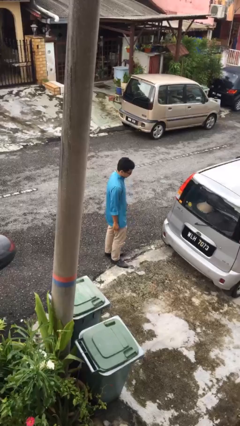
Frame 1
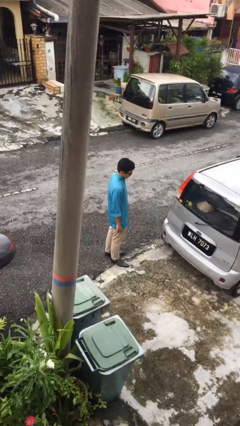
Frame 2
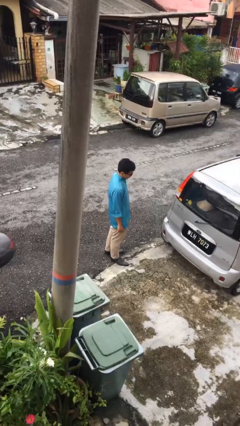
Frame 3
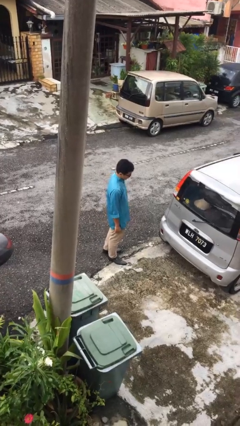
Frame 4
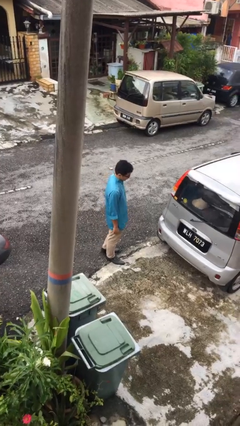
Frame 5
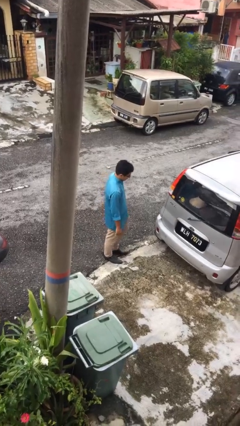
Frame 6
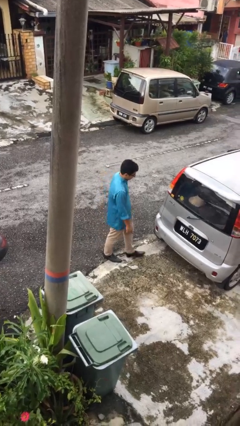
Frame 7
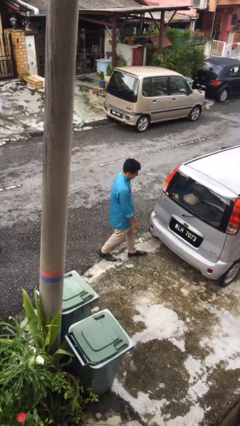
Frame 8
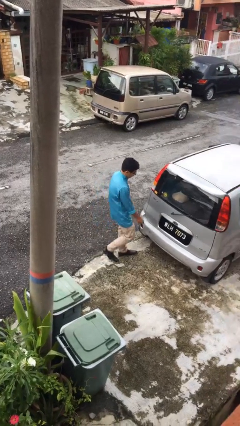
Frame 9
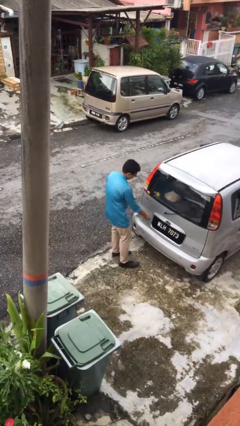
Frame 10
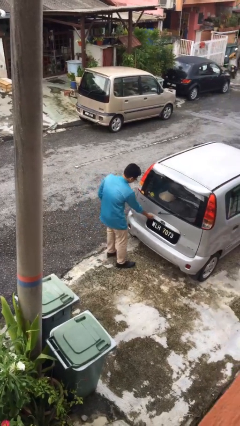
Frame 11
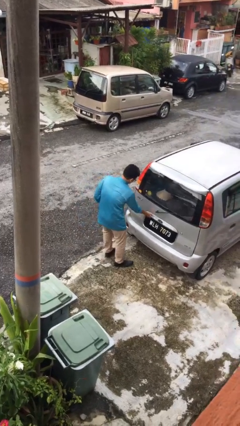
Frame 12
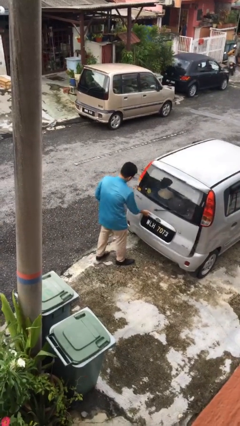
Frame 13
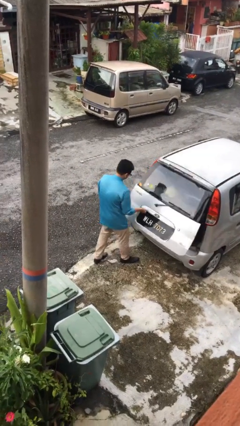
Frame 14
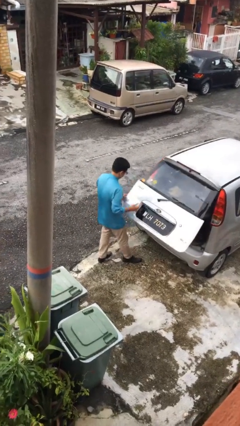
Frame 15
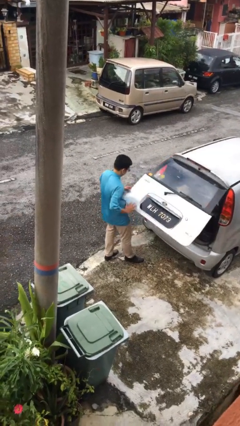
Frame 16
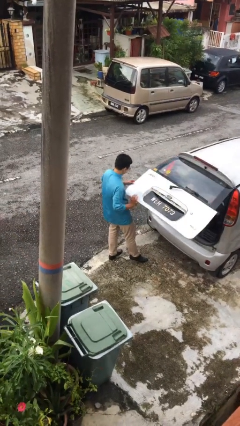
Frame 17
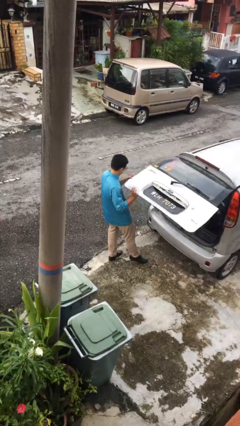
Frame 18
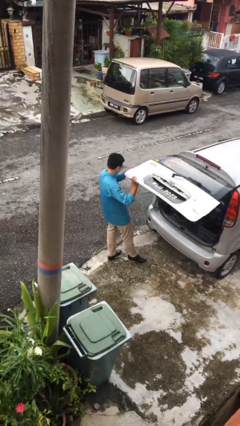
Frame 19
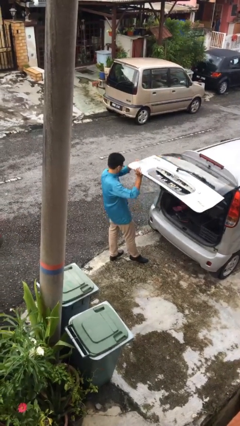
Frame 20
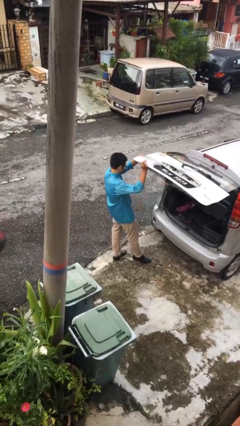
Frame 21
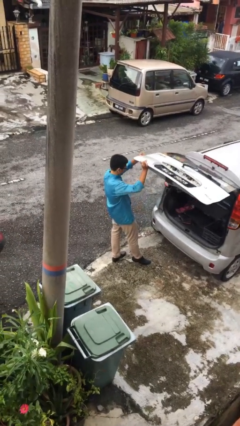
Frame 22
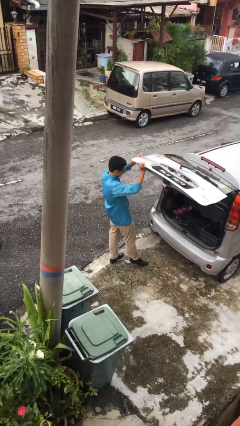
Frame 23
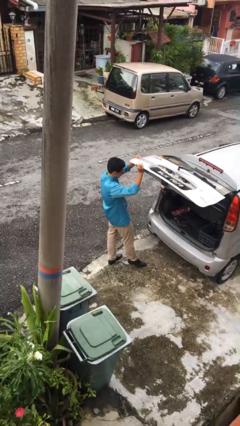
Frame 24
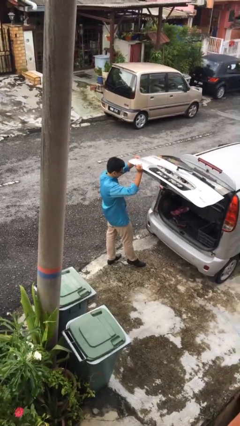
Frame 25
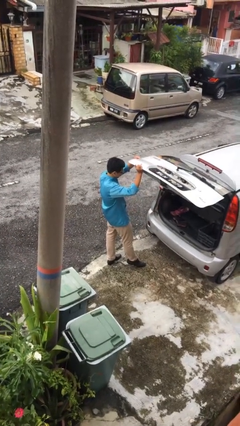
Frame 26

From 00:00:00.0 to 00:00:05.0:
person opens car trunk

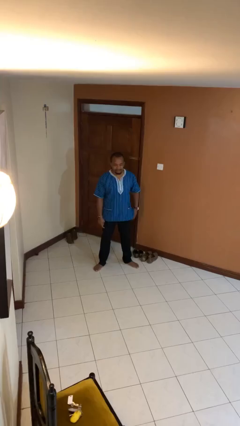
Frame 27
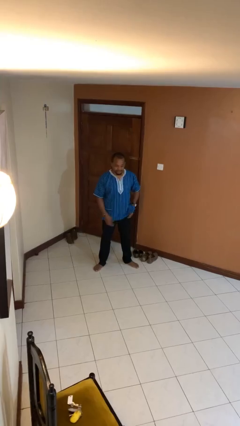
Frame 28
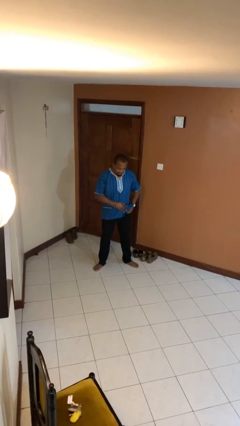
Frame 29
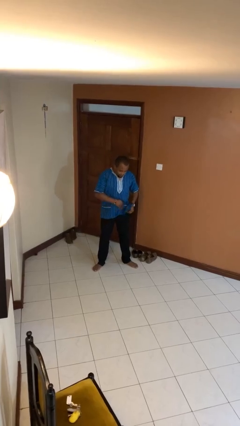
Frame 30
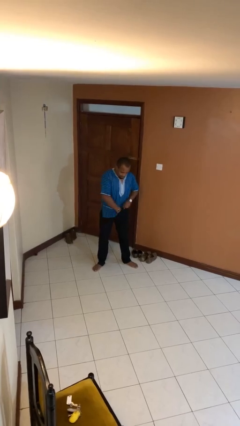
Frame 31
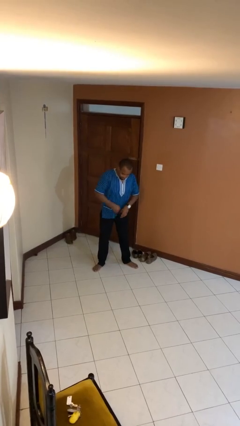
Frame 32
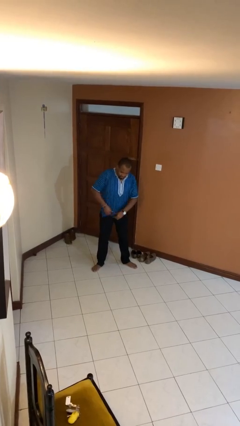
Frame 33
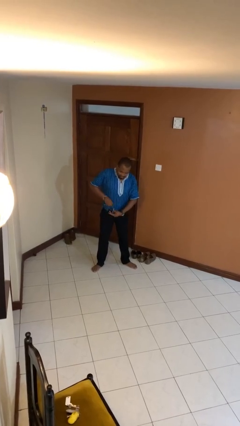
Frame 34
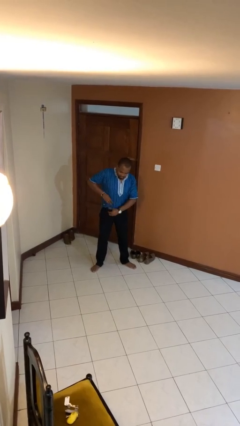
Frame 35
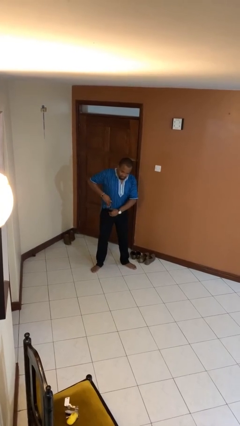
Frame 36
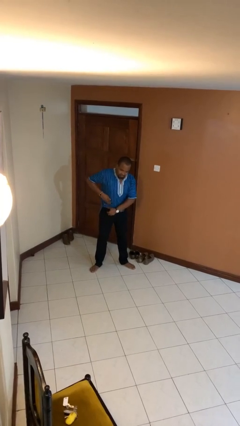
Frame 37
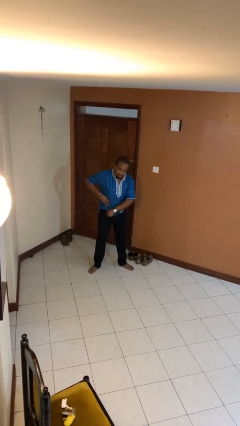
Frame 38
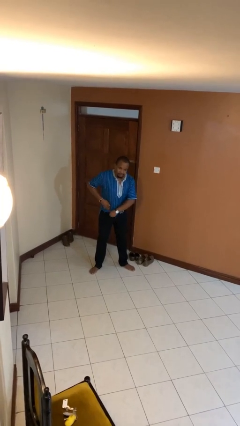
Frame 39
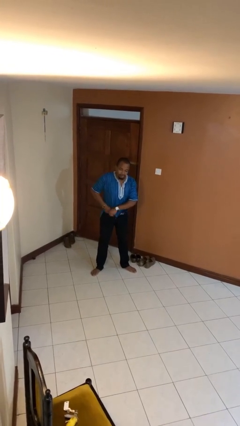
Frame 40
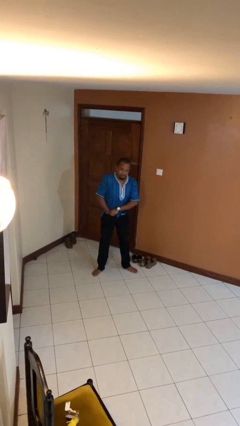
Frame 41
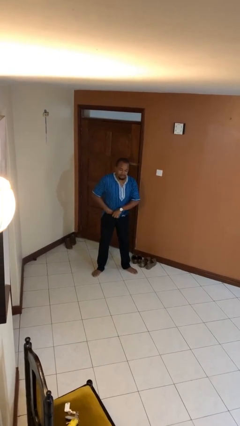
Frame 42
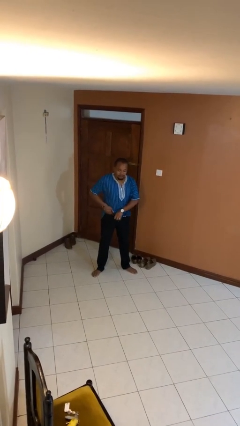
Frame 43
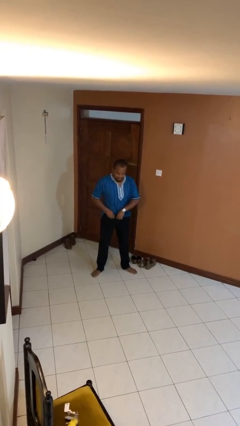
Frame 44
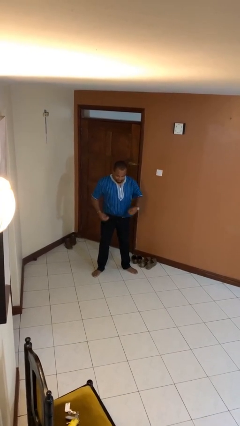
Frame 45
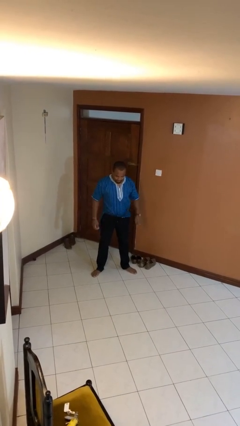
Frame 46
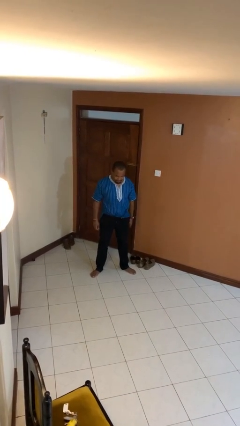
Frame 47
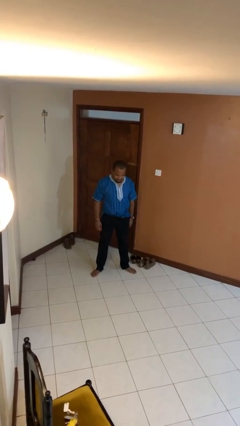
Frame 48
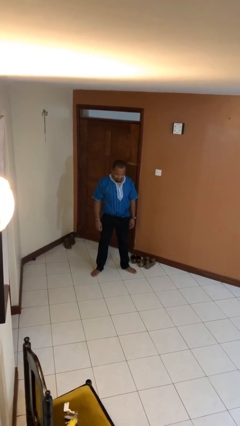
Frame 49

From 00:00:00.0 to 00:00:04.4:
person tucks in shirt

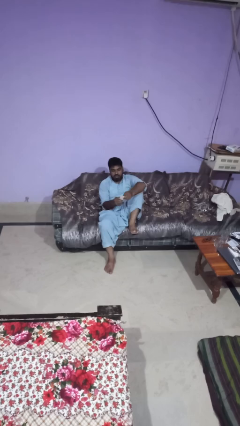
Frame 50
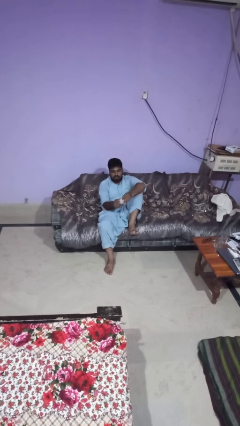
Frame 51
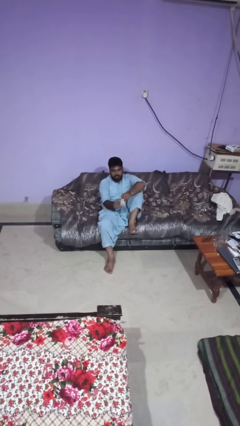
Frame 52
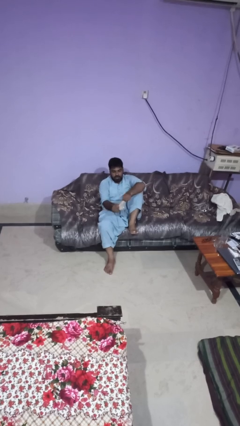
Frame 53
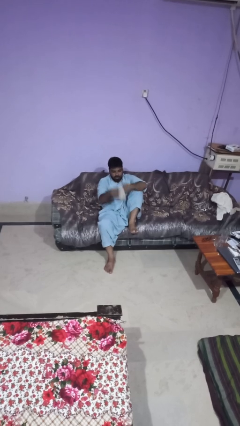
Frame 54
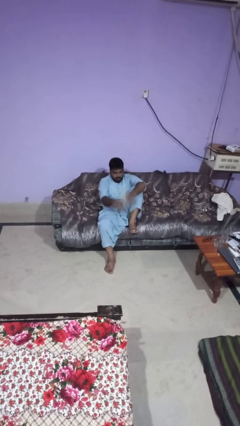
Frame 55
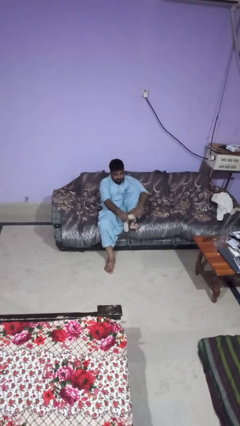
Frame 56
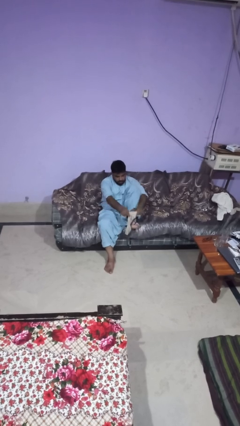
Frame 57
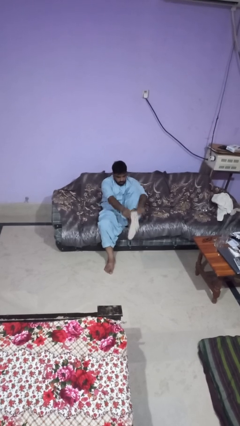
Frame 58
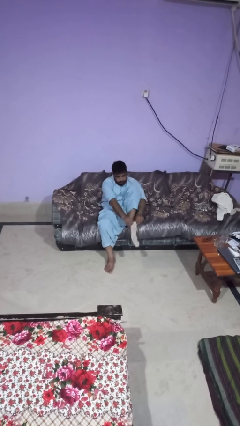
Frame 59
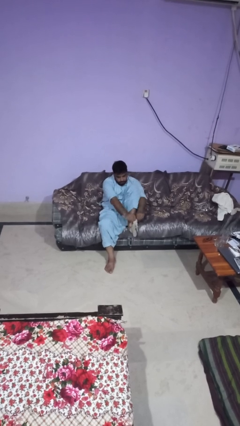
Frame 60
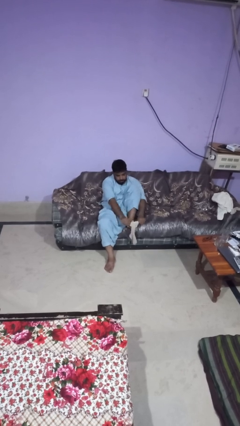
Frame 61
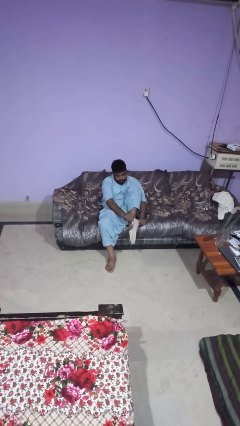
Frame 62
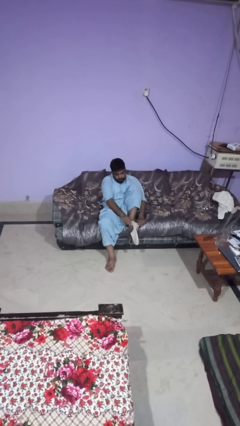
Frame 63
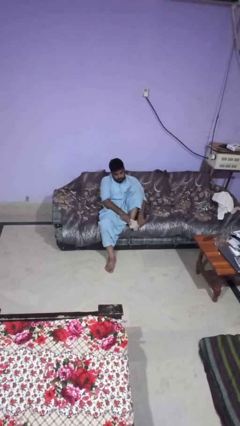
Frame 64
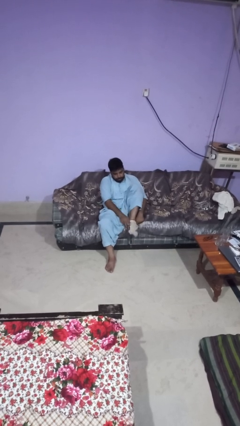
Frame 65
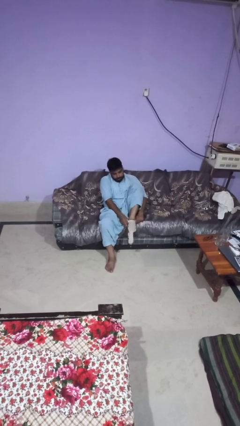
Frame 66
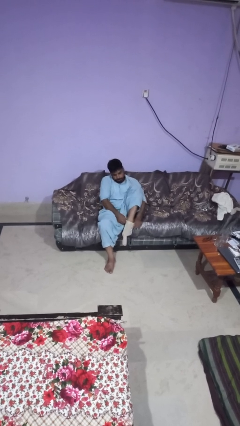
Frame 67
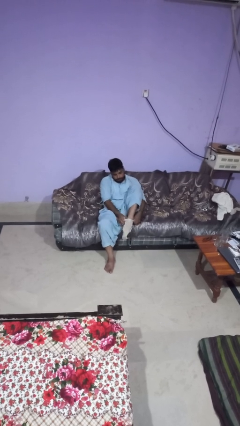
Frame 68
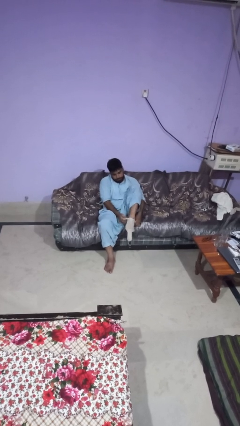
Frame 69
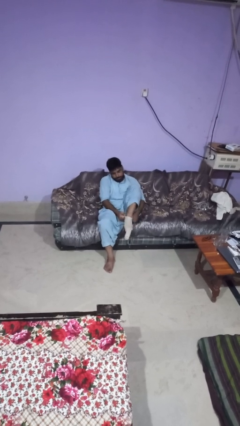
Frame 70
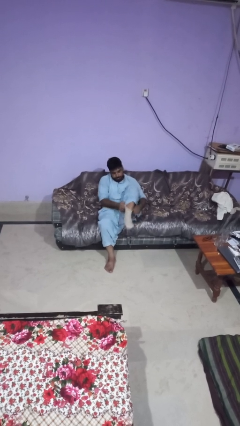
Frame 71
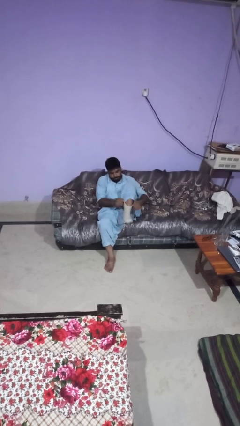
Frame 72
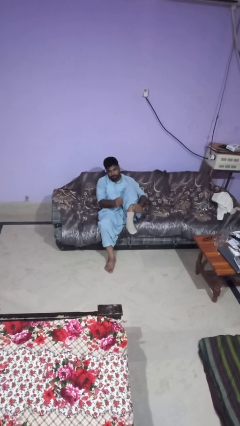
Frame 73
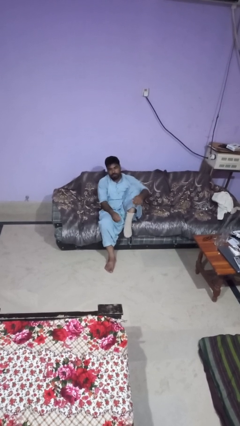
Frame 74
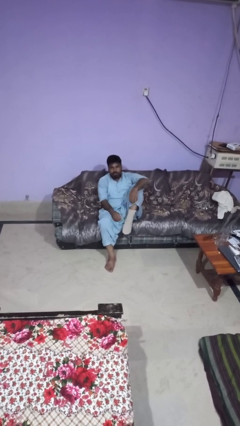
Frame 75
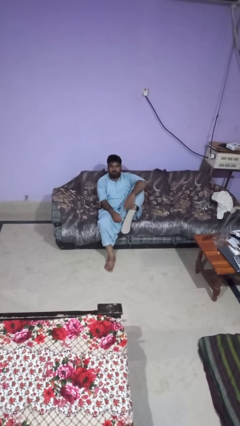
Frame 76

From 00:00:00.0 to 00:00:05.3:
person puts on socks

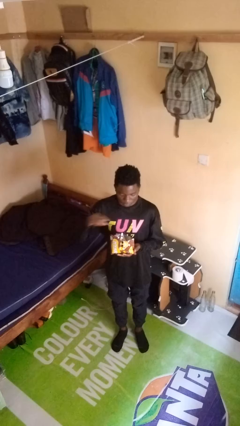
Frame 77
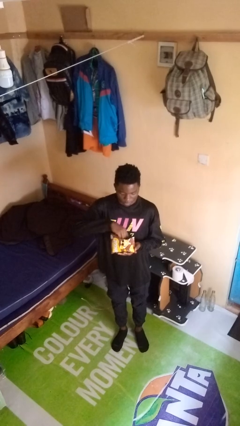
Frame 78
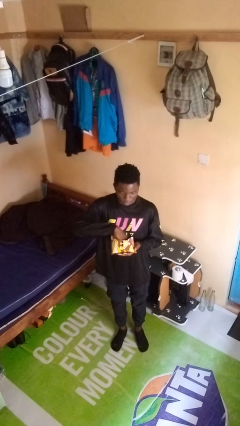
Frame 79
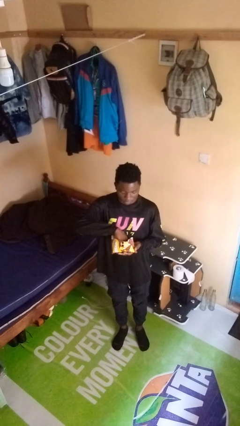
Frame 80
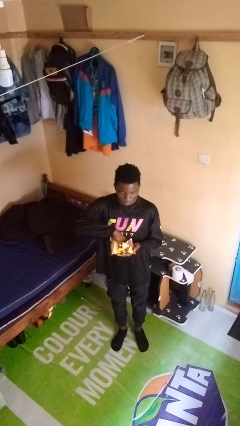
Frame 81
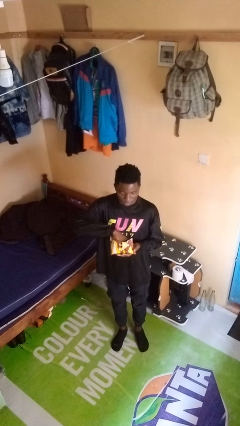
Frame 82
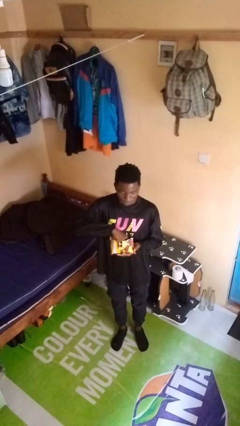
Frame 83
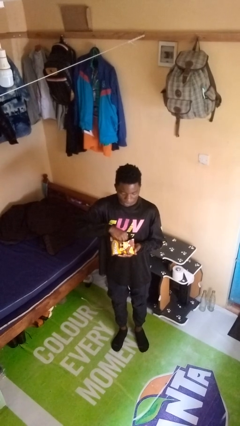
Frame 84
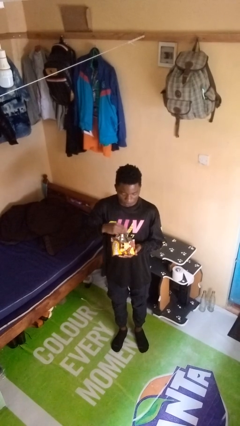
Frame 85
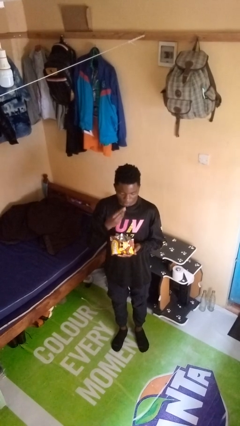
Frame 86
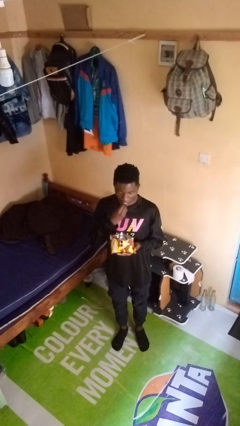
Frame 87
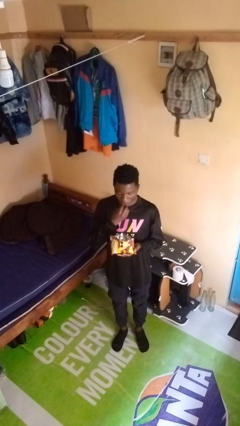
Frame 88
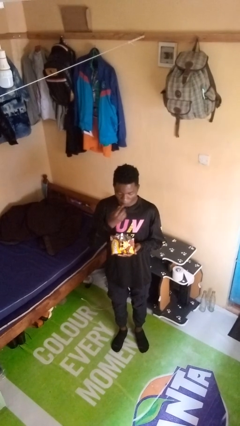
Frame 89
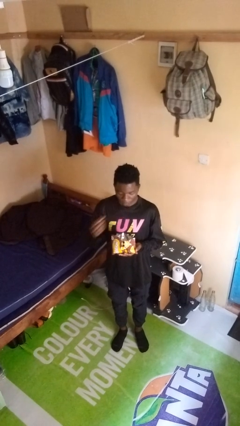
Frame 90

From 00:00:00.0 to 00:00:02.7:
person eats snack from bag

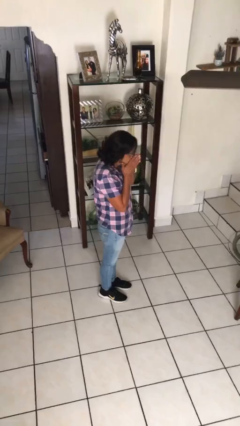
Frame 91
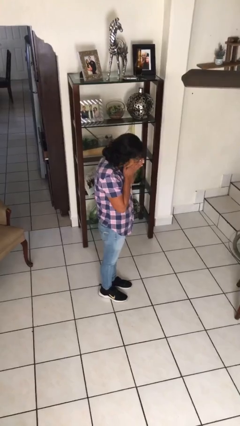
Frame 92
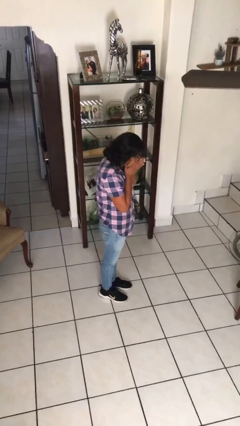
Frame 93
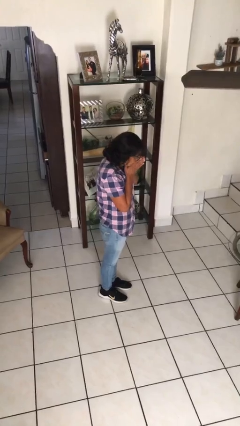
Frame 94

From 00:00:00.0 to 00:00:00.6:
person sneezes into hand
